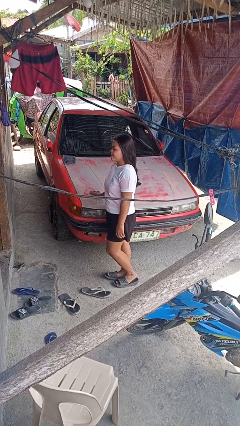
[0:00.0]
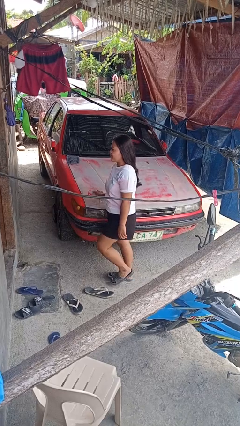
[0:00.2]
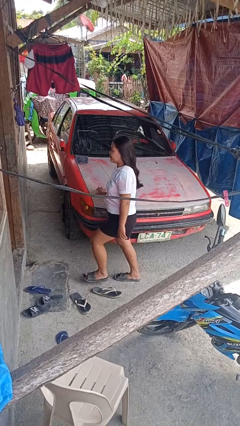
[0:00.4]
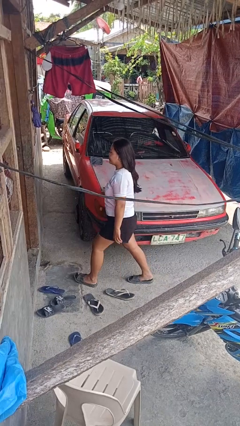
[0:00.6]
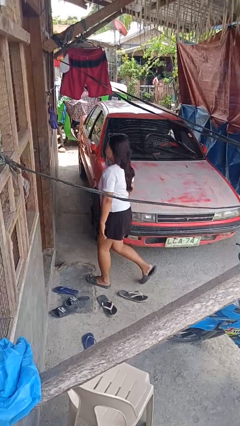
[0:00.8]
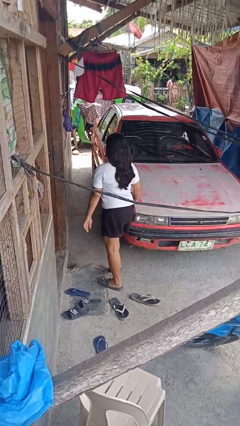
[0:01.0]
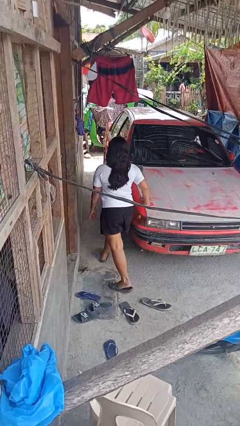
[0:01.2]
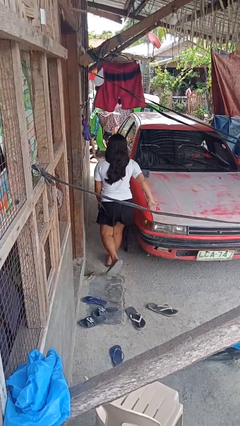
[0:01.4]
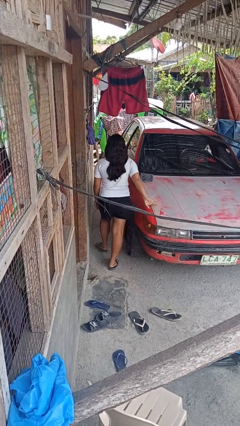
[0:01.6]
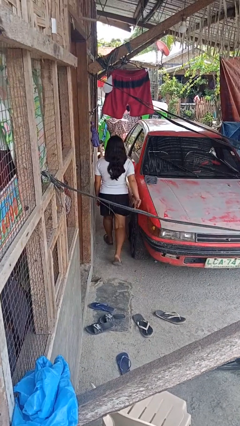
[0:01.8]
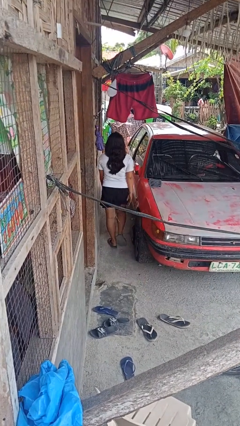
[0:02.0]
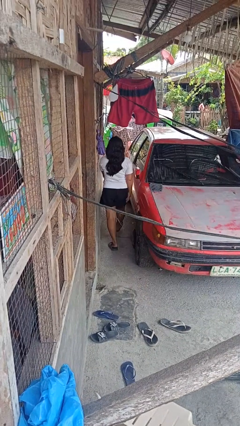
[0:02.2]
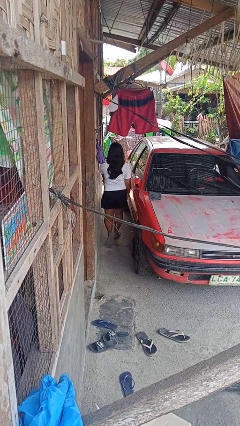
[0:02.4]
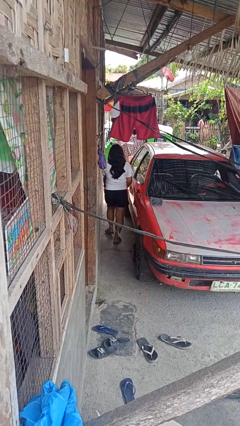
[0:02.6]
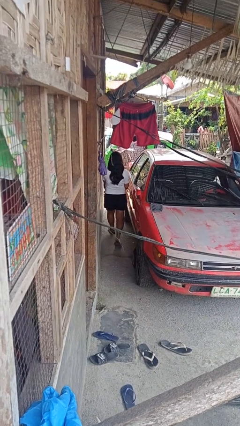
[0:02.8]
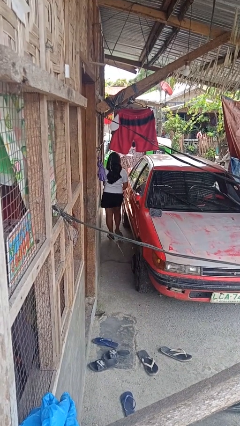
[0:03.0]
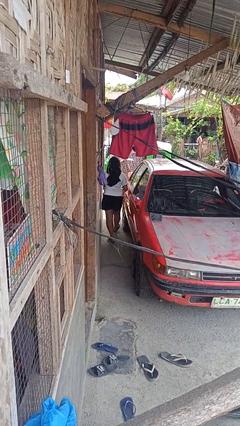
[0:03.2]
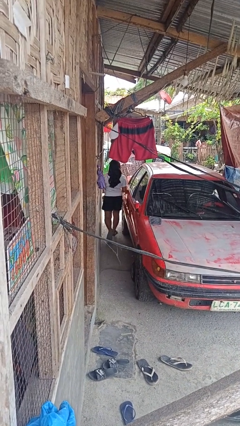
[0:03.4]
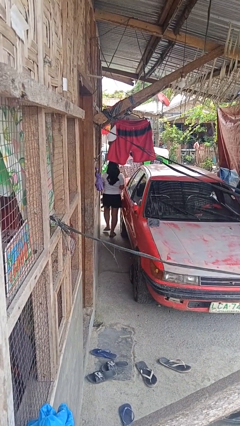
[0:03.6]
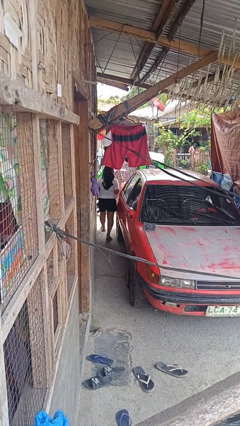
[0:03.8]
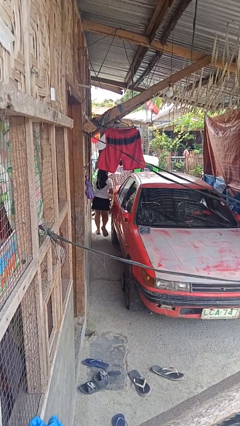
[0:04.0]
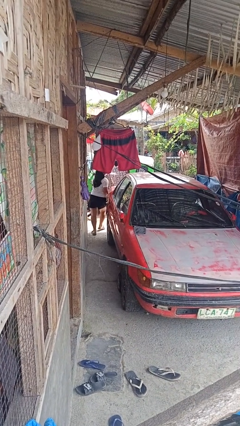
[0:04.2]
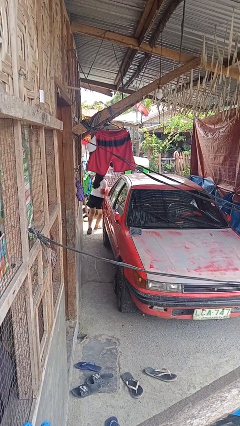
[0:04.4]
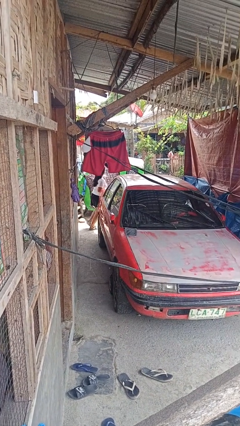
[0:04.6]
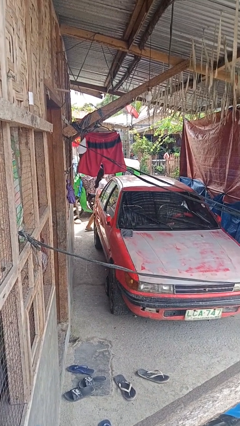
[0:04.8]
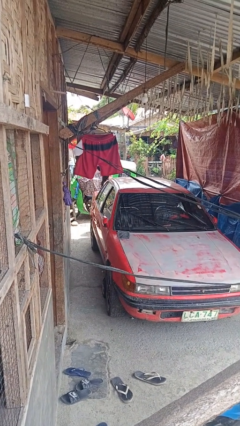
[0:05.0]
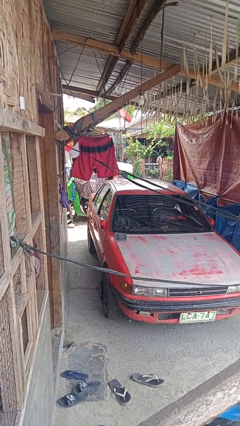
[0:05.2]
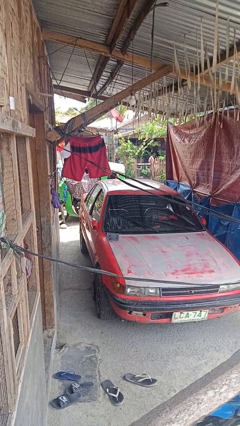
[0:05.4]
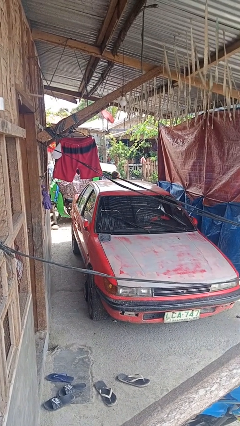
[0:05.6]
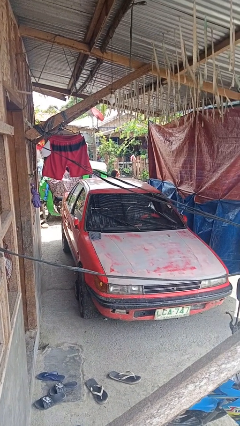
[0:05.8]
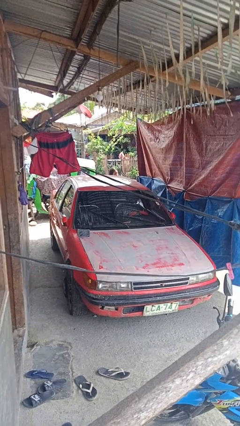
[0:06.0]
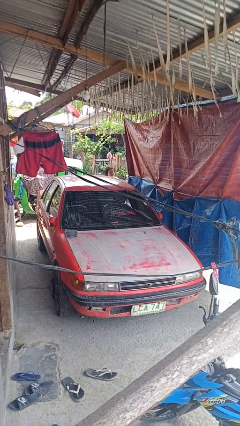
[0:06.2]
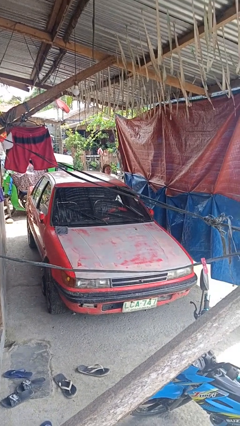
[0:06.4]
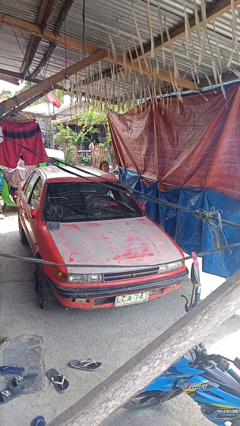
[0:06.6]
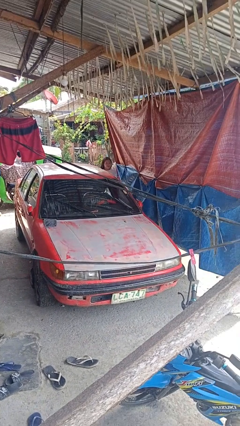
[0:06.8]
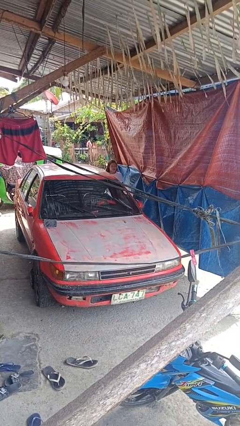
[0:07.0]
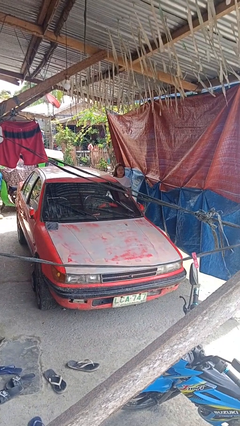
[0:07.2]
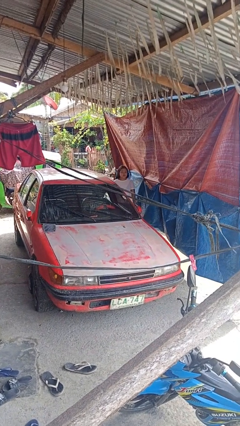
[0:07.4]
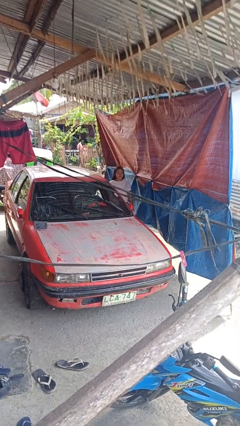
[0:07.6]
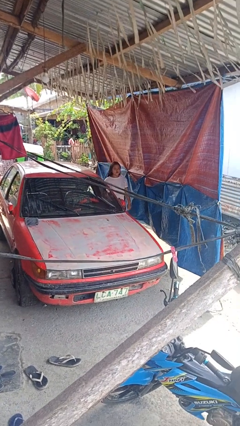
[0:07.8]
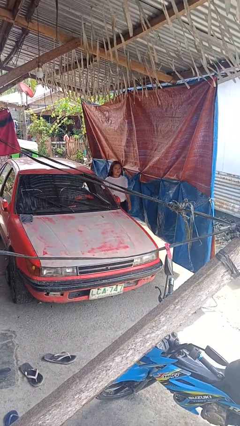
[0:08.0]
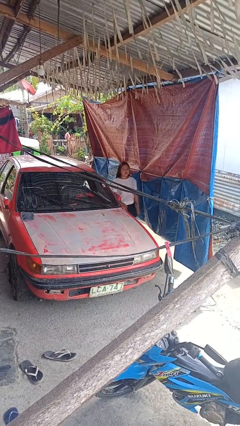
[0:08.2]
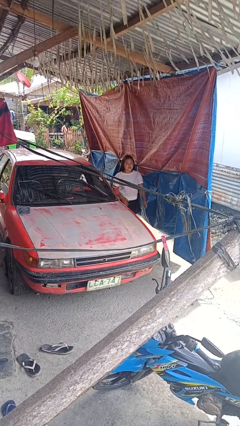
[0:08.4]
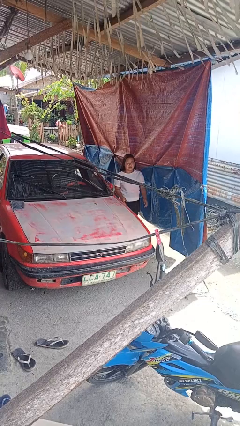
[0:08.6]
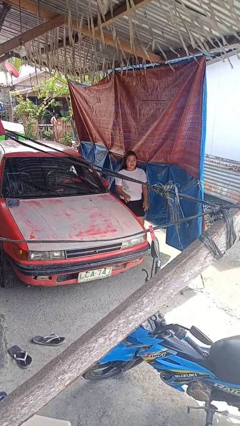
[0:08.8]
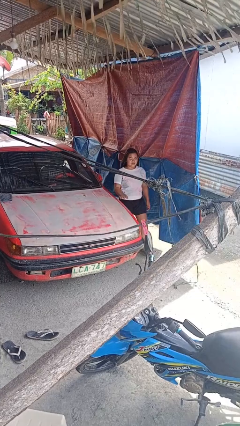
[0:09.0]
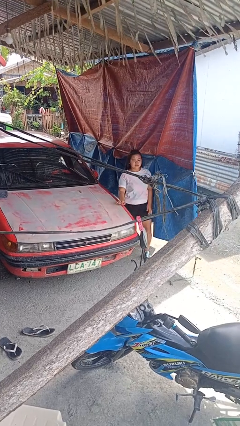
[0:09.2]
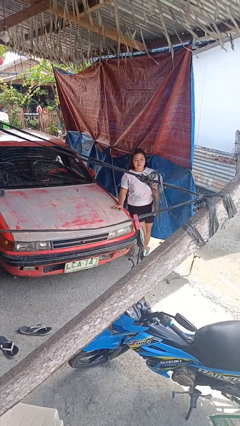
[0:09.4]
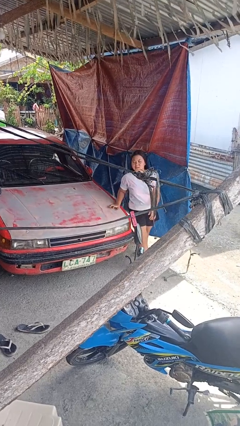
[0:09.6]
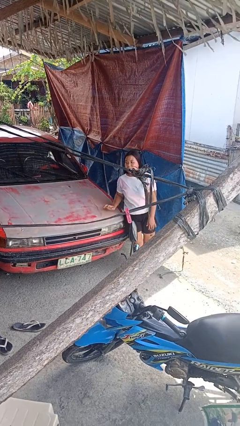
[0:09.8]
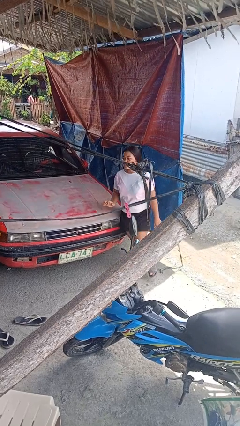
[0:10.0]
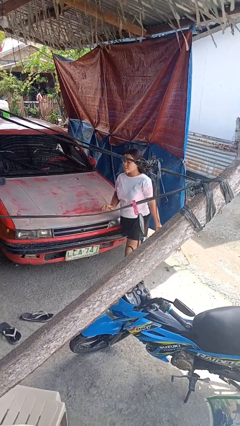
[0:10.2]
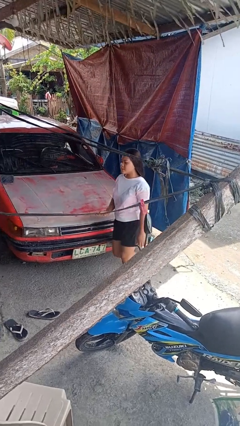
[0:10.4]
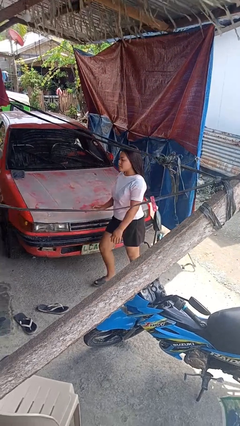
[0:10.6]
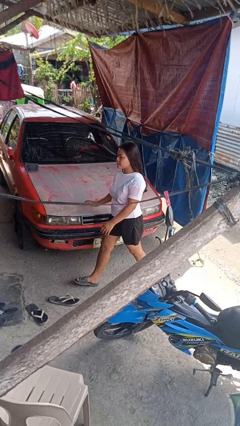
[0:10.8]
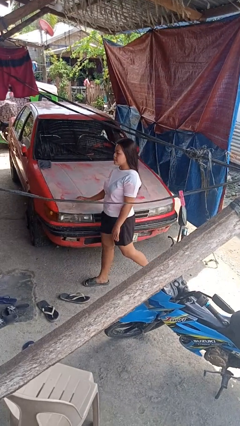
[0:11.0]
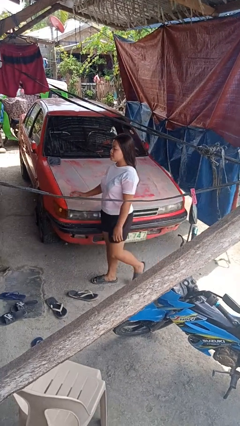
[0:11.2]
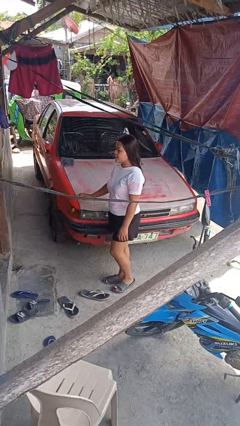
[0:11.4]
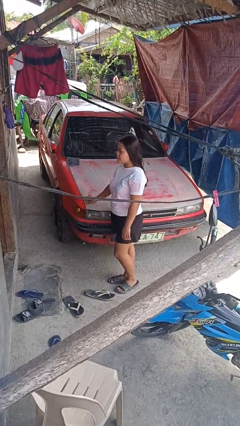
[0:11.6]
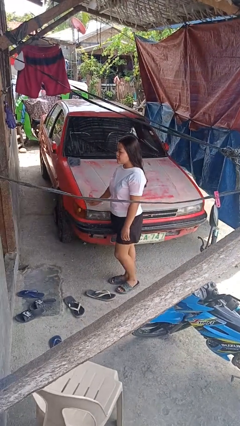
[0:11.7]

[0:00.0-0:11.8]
person walks around car

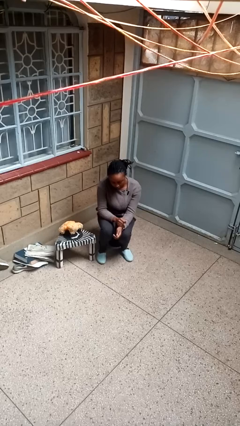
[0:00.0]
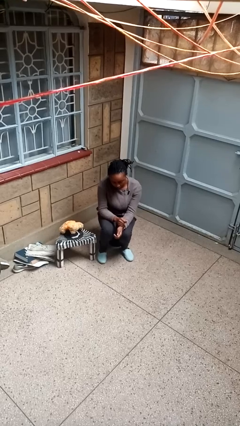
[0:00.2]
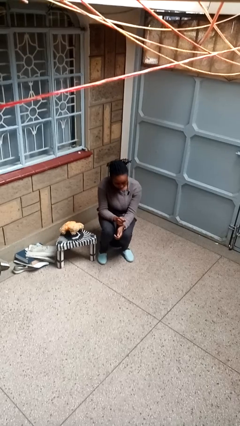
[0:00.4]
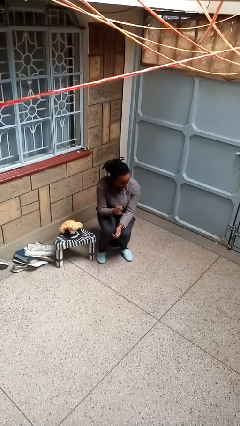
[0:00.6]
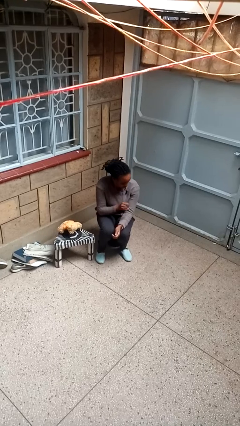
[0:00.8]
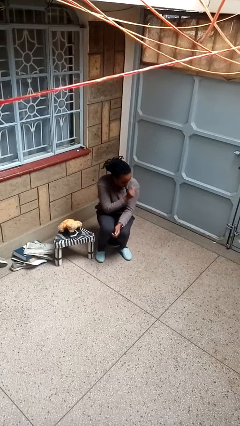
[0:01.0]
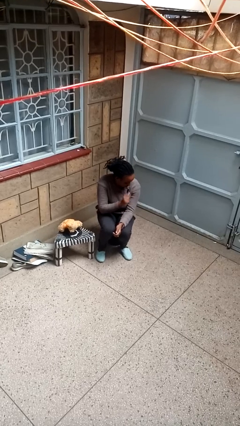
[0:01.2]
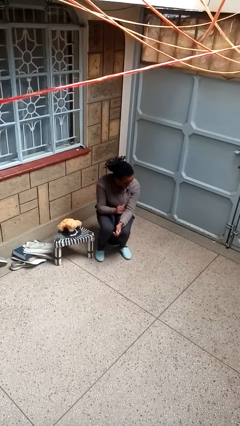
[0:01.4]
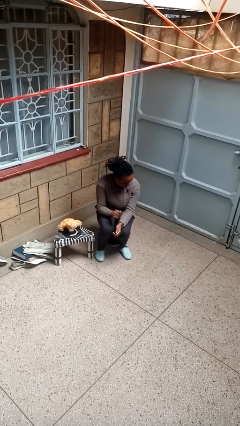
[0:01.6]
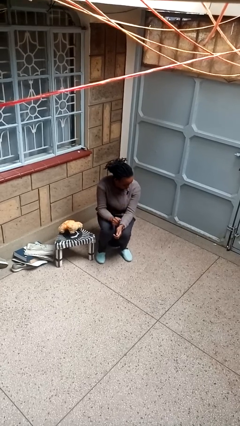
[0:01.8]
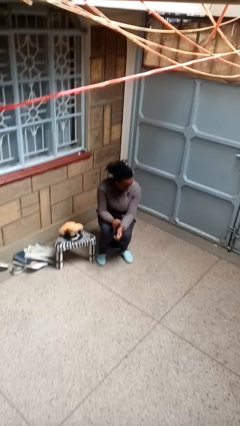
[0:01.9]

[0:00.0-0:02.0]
person swats bug

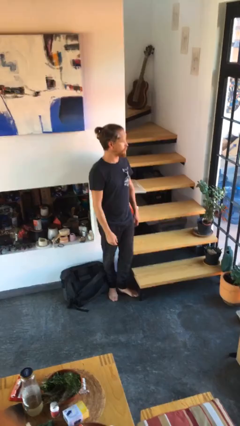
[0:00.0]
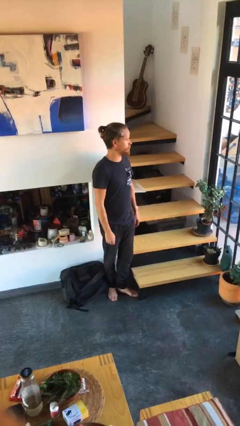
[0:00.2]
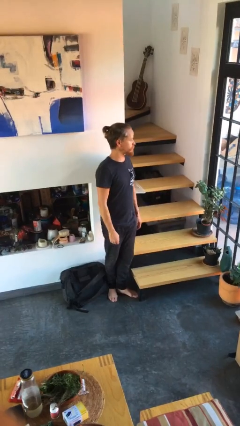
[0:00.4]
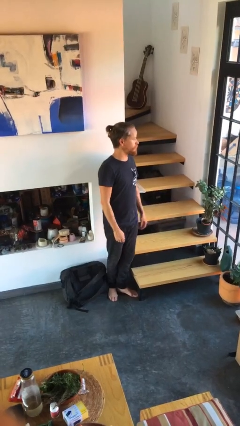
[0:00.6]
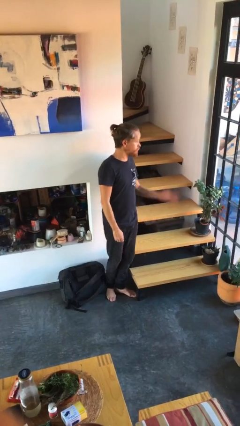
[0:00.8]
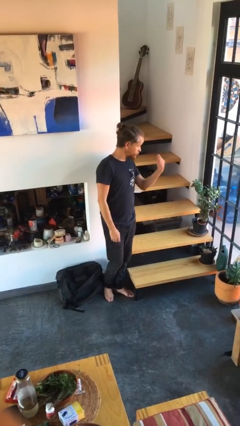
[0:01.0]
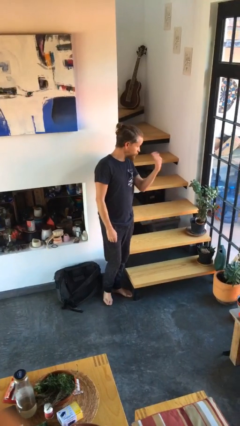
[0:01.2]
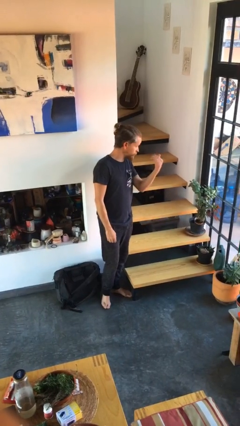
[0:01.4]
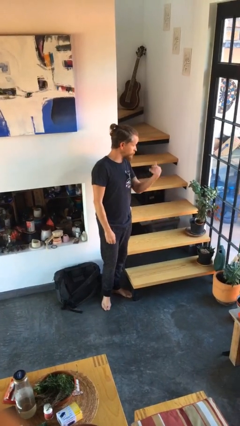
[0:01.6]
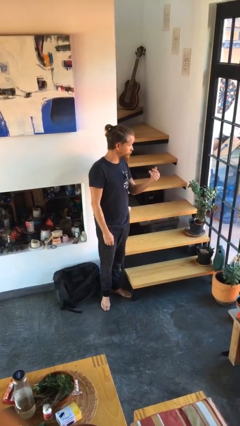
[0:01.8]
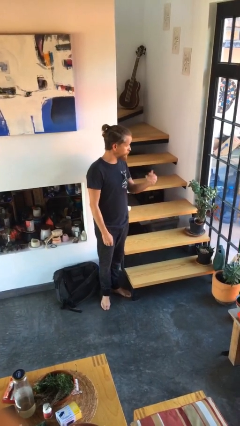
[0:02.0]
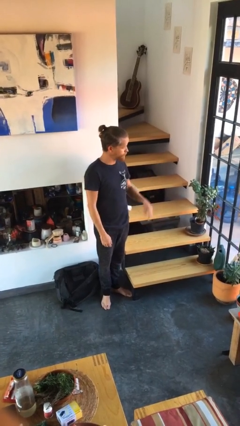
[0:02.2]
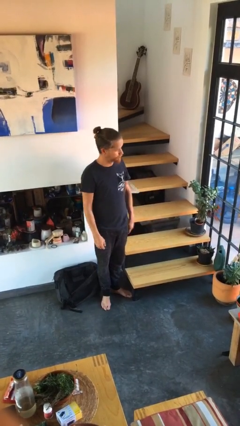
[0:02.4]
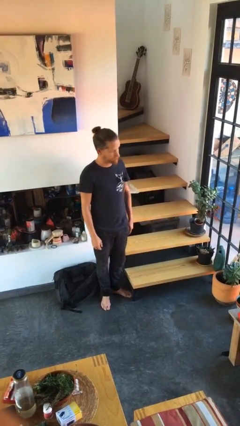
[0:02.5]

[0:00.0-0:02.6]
person gestures come here

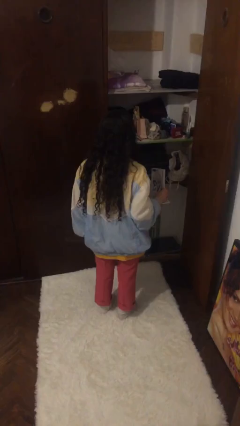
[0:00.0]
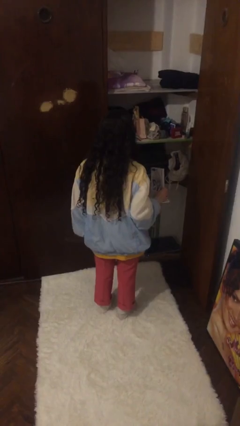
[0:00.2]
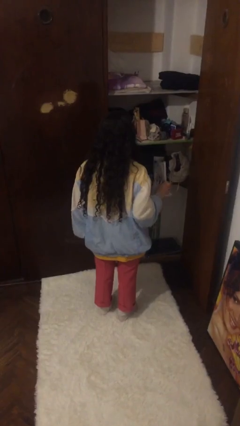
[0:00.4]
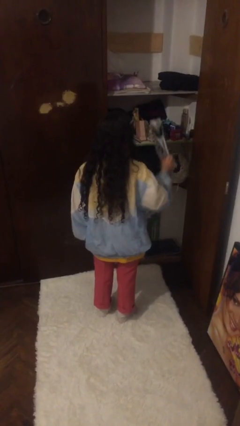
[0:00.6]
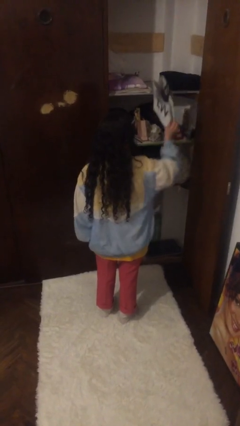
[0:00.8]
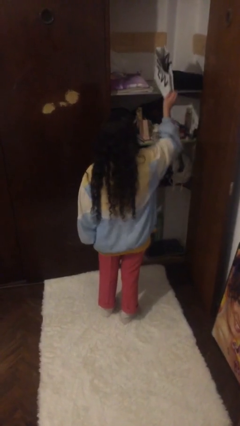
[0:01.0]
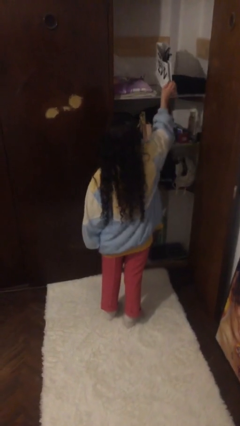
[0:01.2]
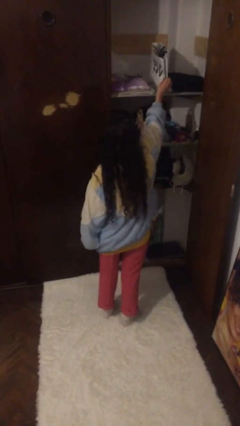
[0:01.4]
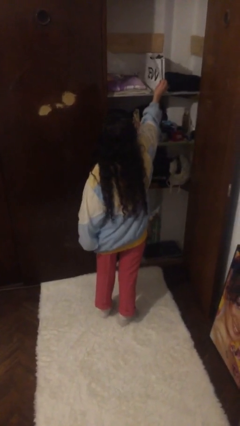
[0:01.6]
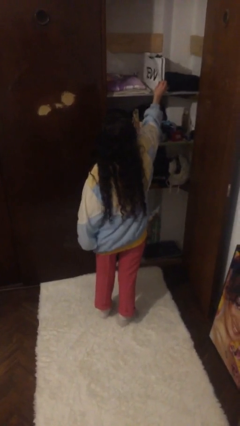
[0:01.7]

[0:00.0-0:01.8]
person puts down object on shelf
